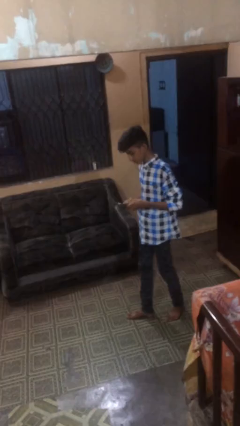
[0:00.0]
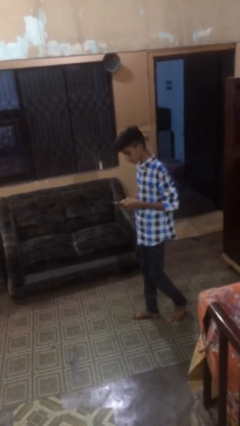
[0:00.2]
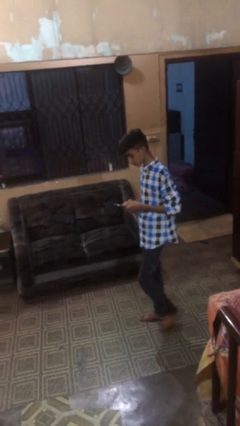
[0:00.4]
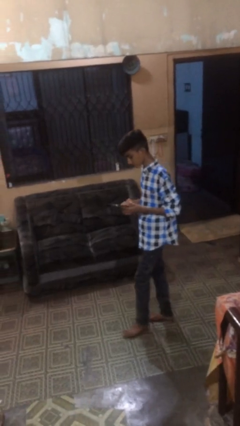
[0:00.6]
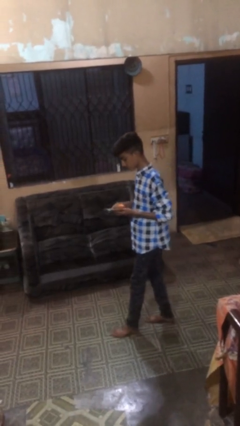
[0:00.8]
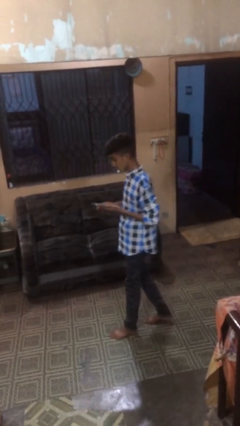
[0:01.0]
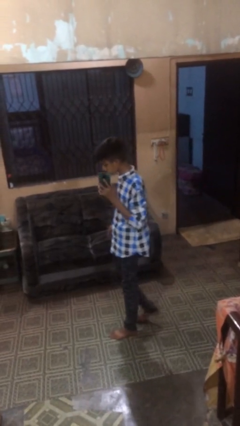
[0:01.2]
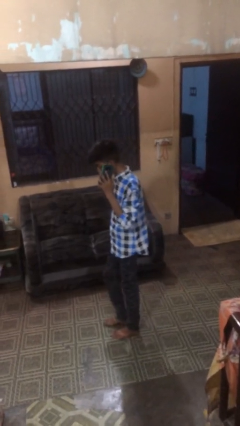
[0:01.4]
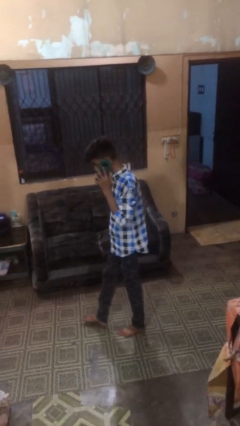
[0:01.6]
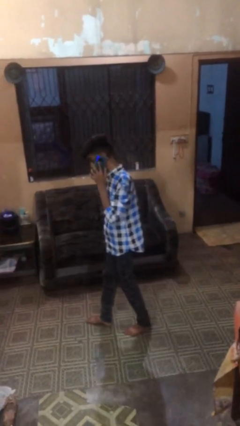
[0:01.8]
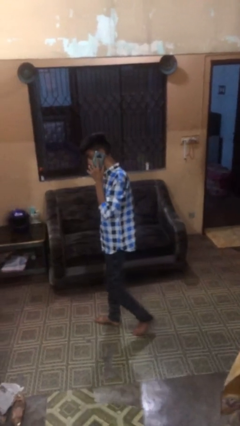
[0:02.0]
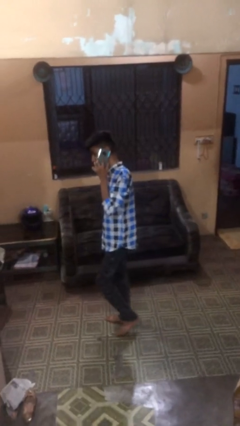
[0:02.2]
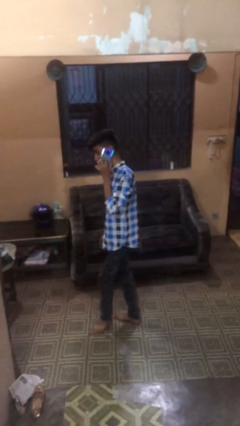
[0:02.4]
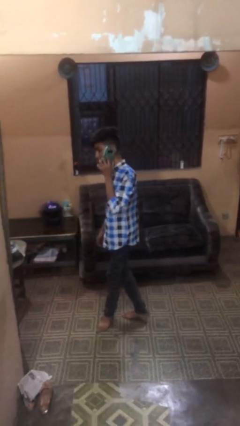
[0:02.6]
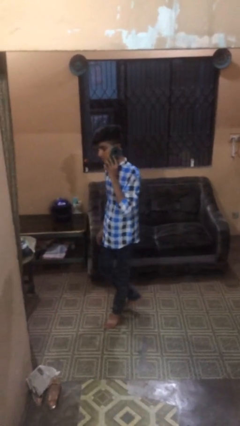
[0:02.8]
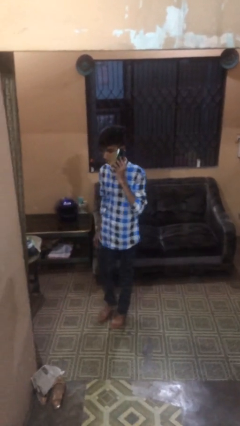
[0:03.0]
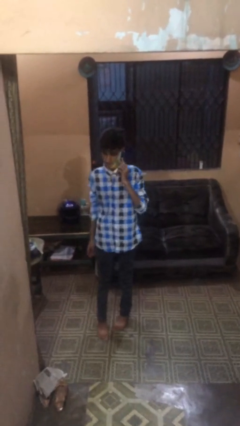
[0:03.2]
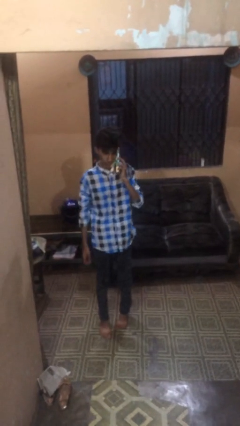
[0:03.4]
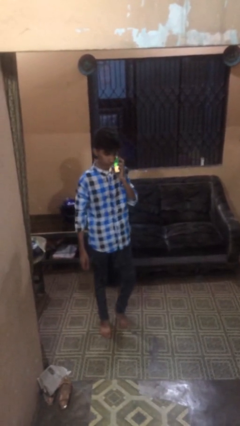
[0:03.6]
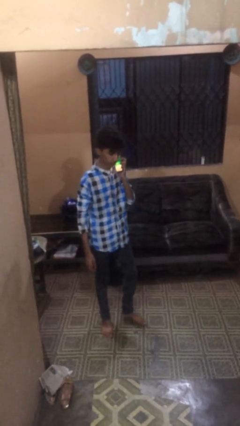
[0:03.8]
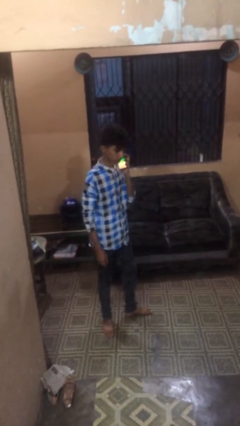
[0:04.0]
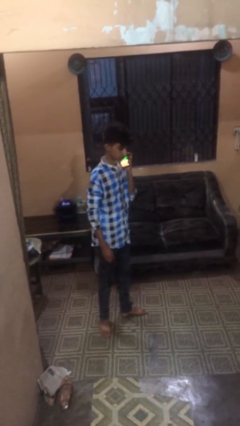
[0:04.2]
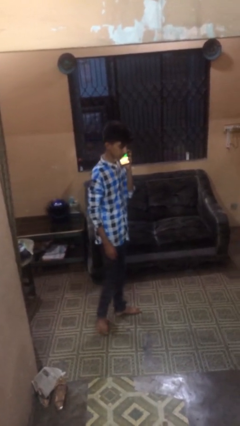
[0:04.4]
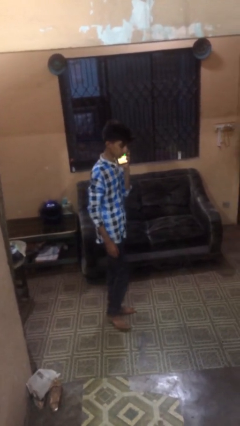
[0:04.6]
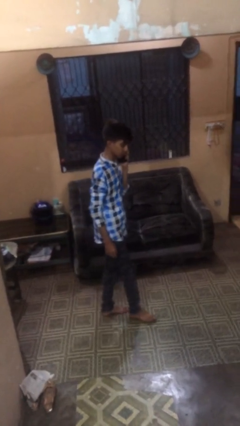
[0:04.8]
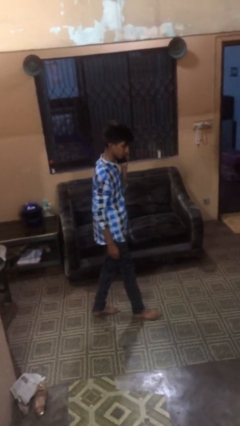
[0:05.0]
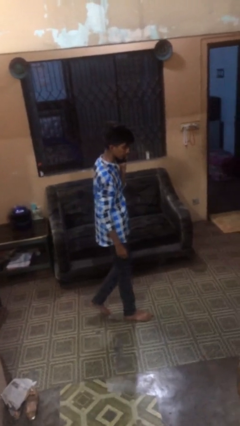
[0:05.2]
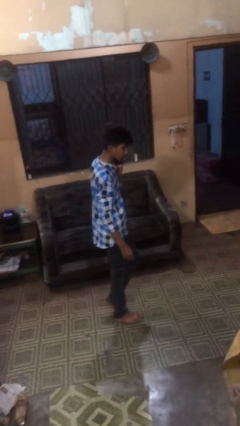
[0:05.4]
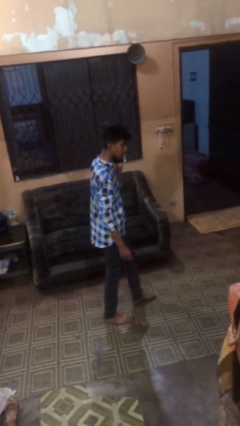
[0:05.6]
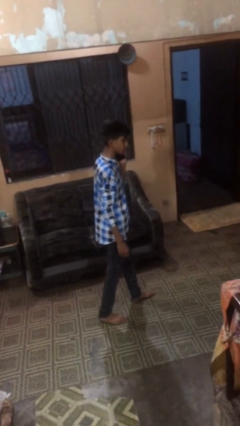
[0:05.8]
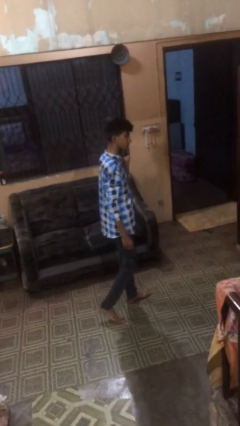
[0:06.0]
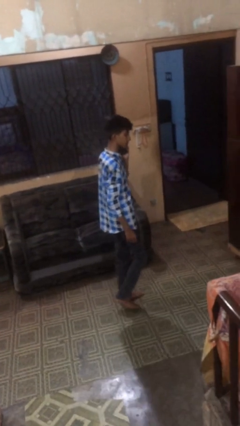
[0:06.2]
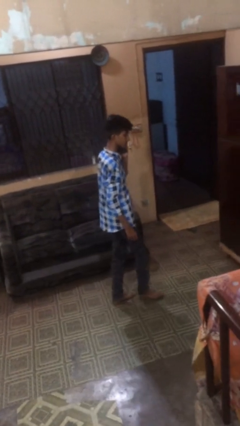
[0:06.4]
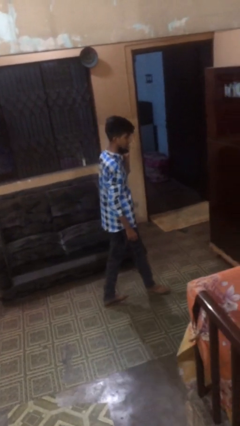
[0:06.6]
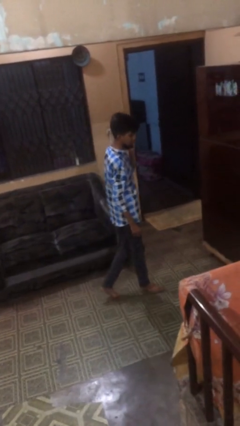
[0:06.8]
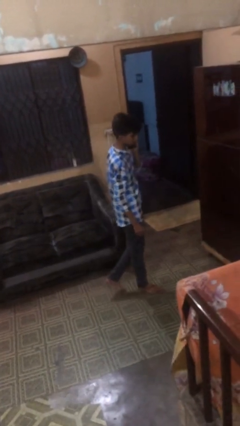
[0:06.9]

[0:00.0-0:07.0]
person talks on phone

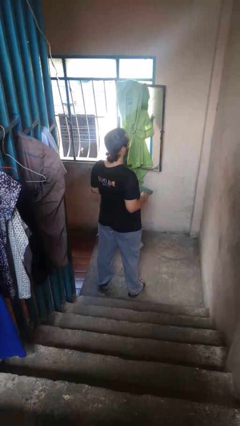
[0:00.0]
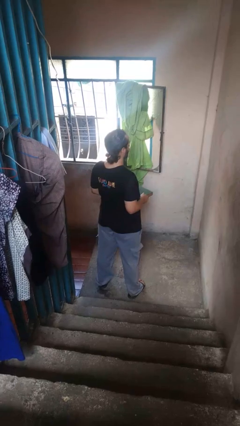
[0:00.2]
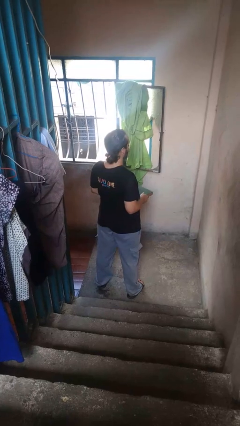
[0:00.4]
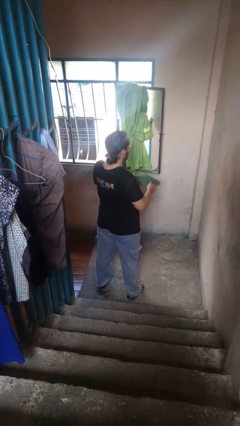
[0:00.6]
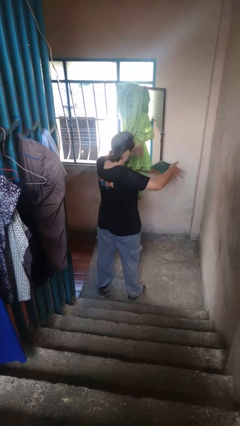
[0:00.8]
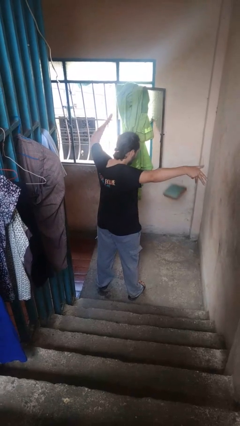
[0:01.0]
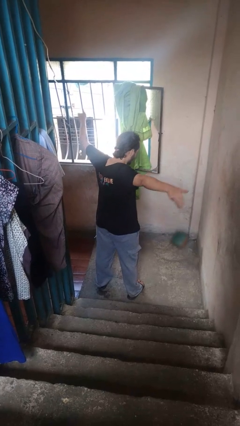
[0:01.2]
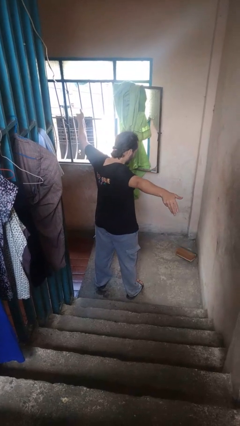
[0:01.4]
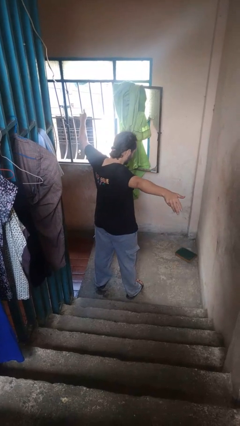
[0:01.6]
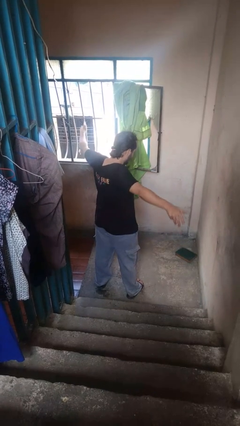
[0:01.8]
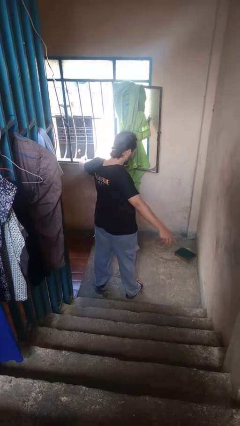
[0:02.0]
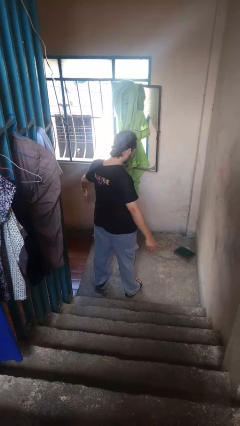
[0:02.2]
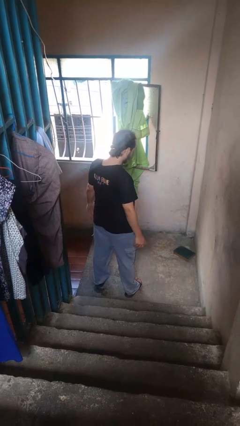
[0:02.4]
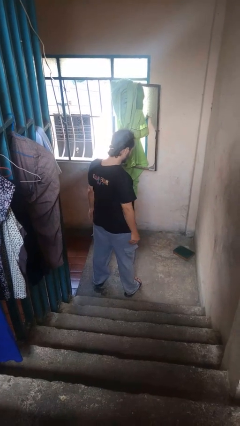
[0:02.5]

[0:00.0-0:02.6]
person throws object into air

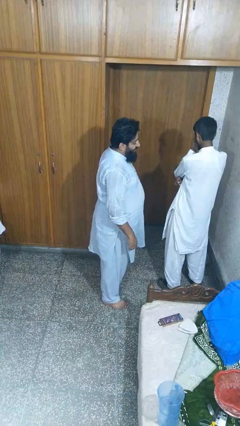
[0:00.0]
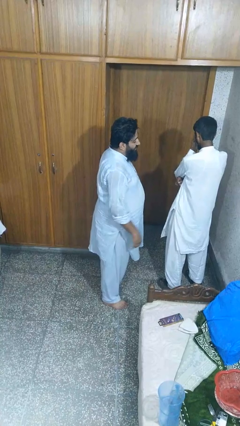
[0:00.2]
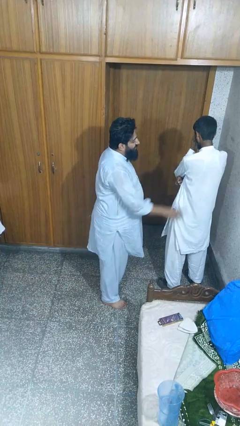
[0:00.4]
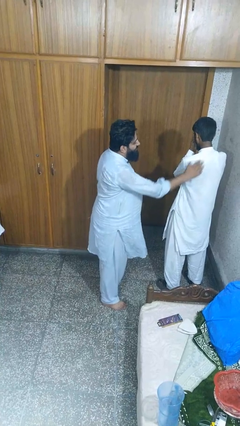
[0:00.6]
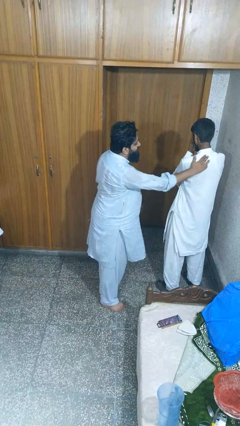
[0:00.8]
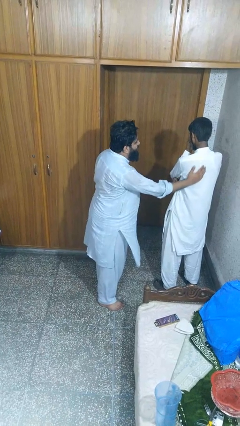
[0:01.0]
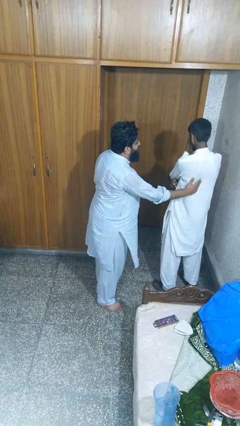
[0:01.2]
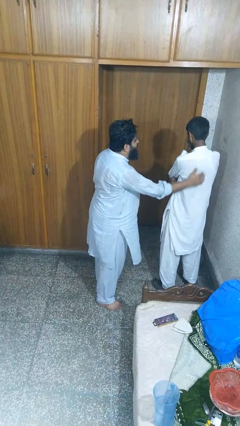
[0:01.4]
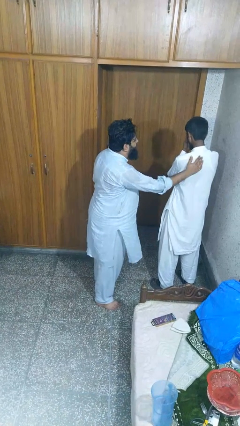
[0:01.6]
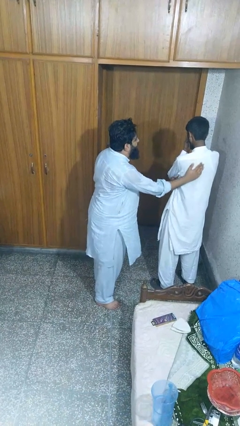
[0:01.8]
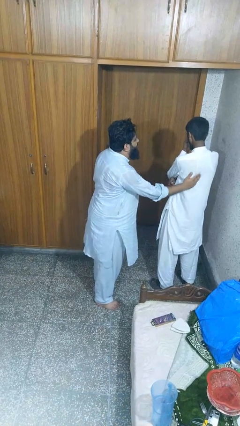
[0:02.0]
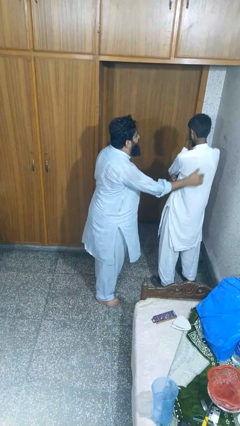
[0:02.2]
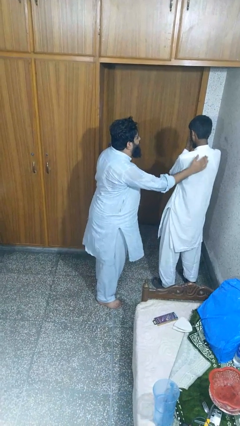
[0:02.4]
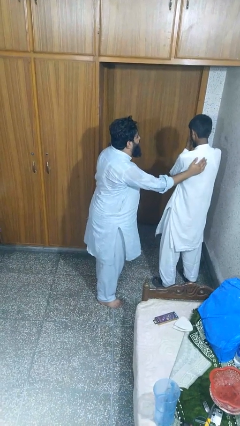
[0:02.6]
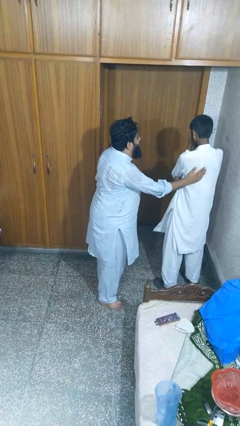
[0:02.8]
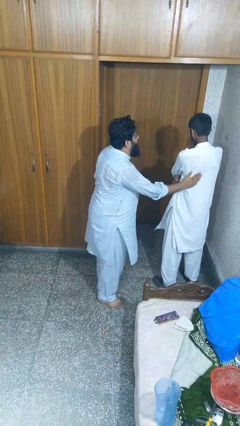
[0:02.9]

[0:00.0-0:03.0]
person touches back of person

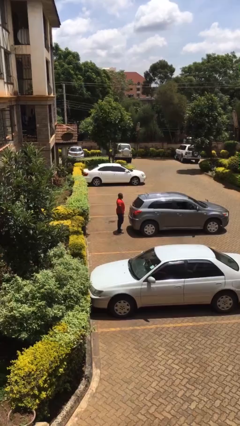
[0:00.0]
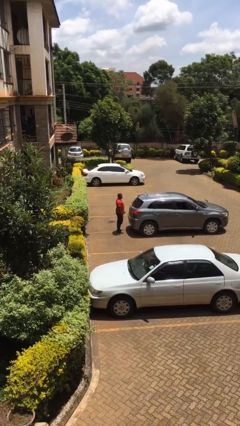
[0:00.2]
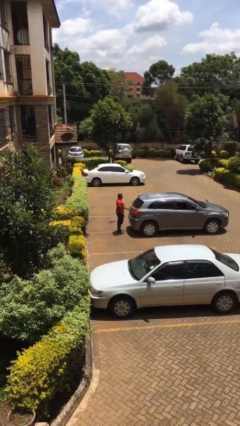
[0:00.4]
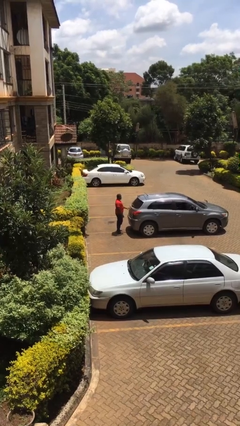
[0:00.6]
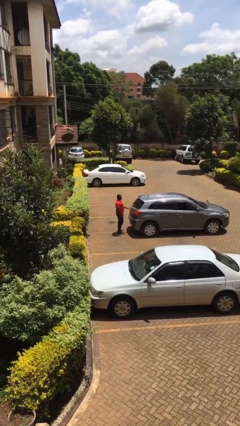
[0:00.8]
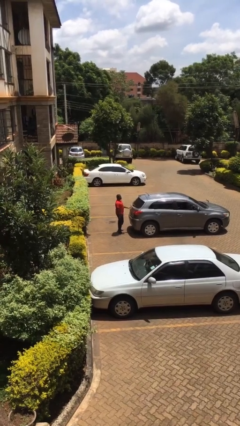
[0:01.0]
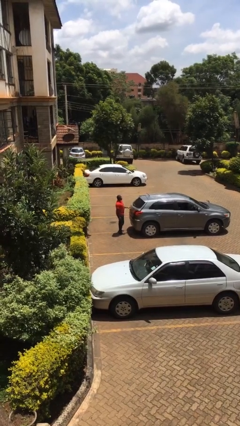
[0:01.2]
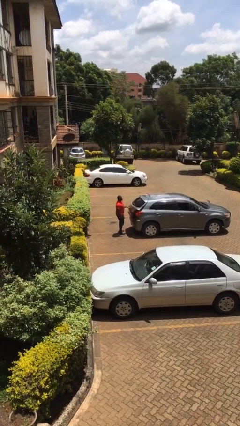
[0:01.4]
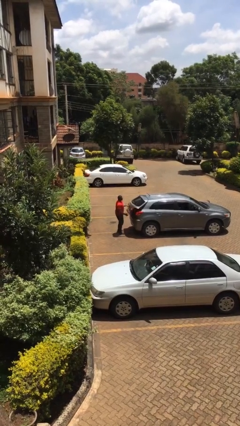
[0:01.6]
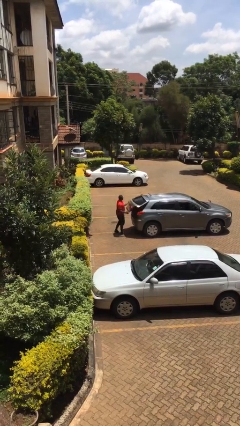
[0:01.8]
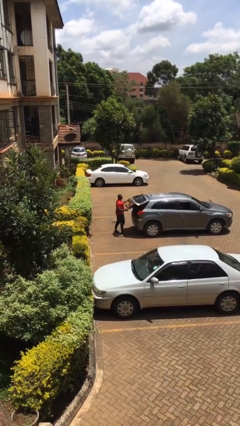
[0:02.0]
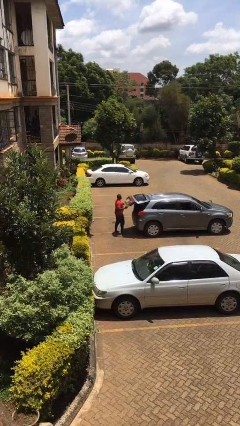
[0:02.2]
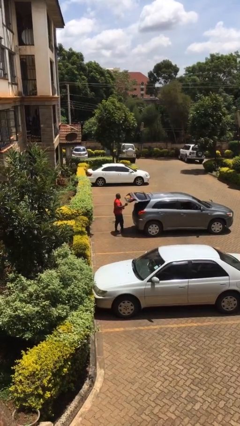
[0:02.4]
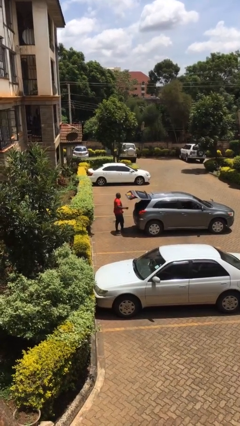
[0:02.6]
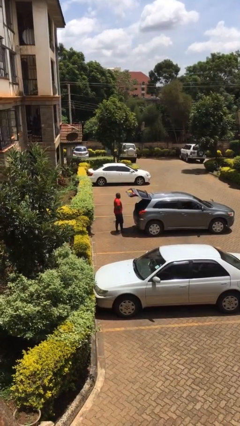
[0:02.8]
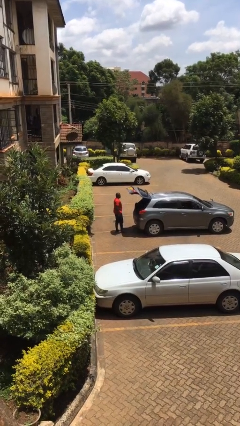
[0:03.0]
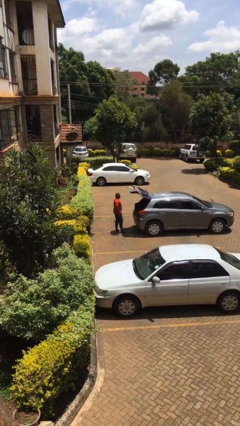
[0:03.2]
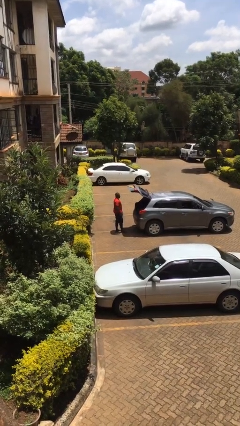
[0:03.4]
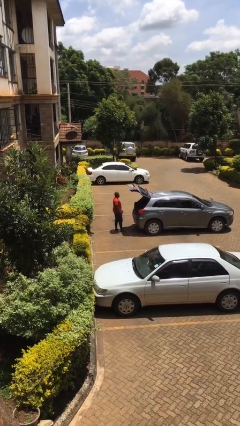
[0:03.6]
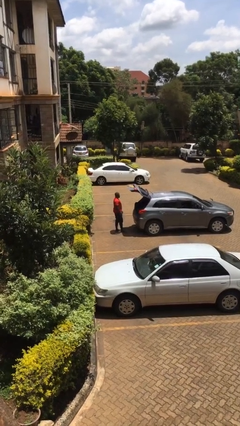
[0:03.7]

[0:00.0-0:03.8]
person opens car trunk

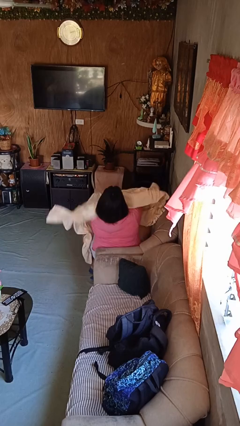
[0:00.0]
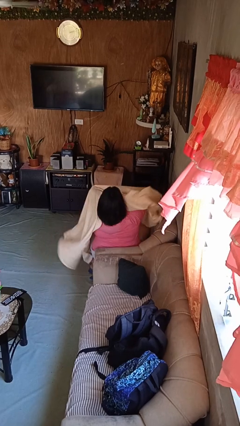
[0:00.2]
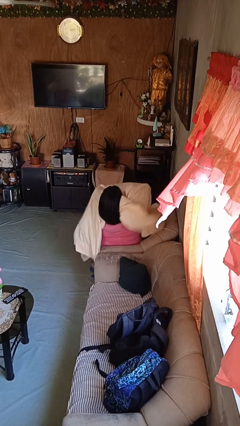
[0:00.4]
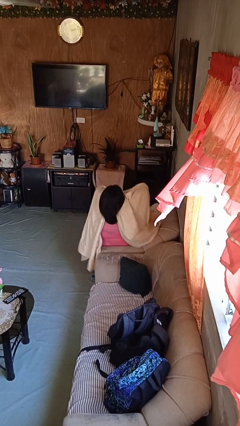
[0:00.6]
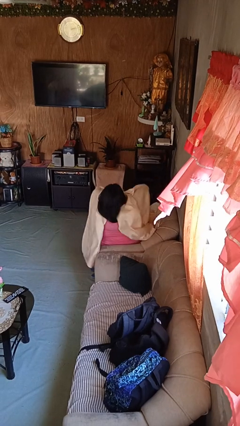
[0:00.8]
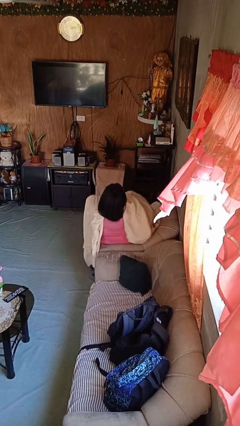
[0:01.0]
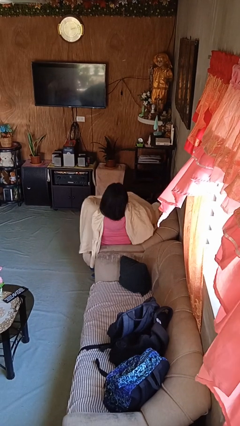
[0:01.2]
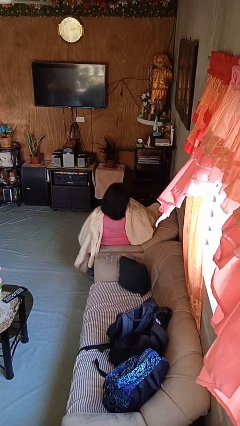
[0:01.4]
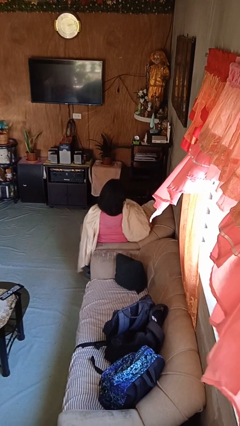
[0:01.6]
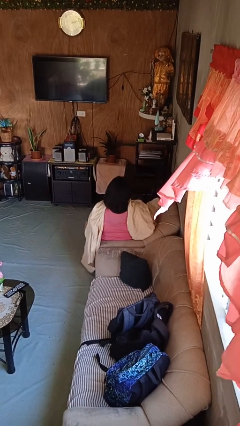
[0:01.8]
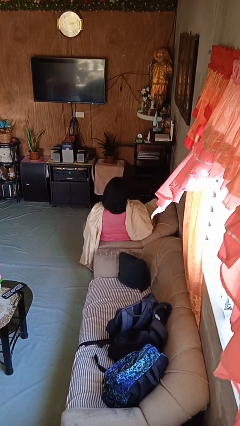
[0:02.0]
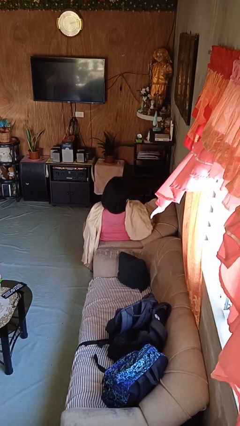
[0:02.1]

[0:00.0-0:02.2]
person covers with blanket
